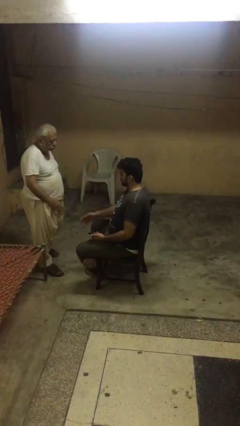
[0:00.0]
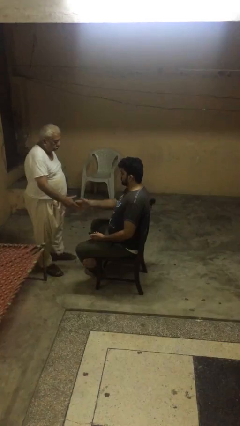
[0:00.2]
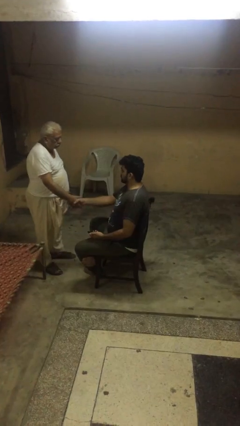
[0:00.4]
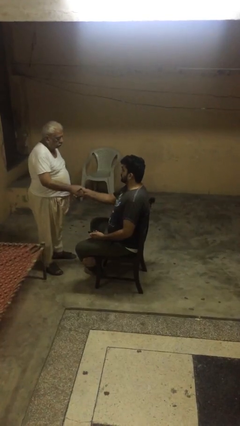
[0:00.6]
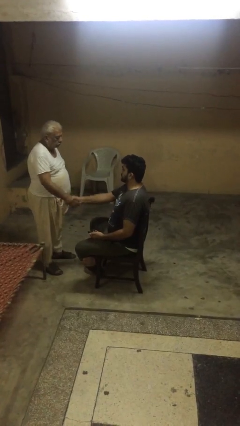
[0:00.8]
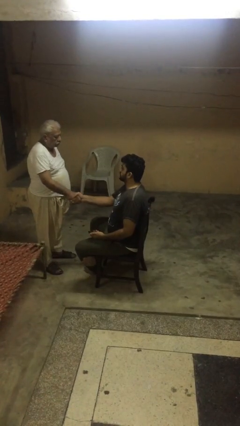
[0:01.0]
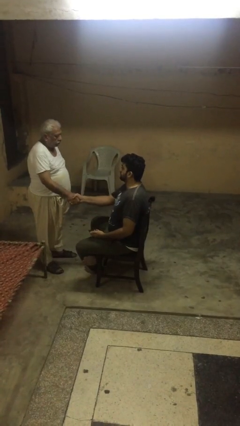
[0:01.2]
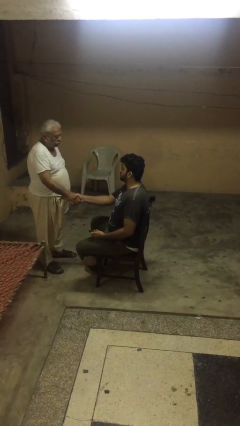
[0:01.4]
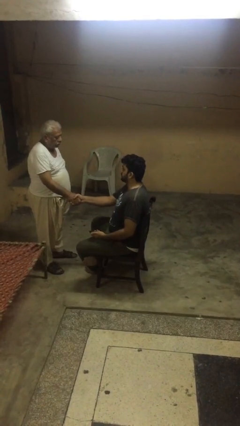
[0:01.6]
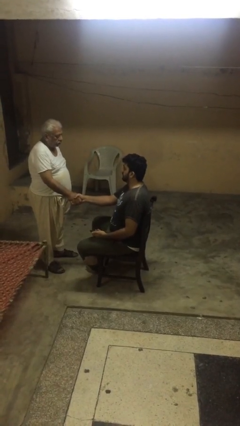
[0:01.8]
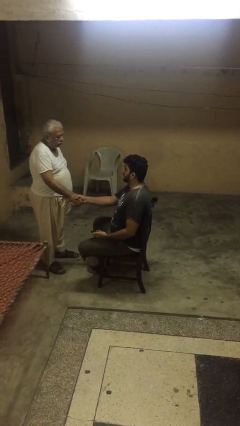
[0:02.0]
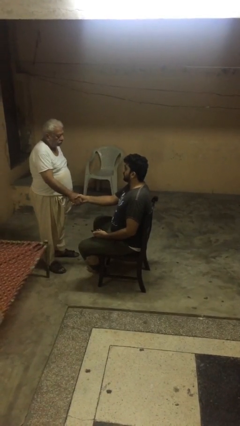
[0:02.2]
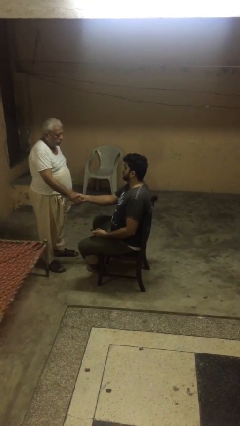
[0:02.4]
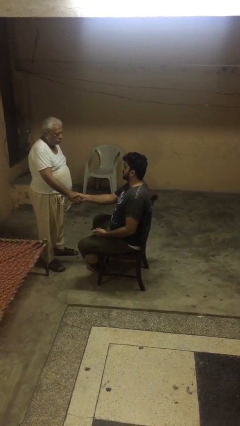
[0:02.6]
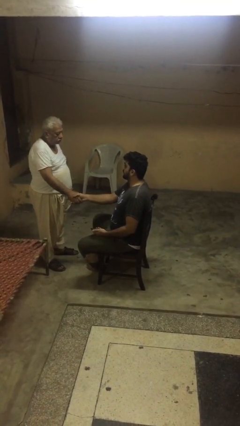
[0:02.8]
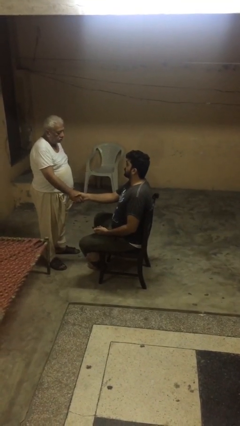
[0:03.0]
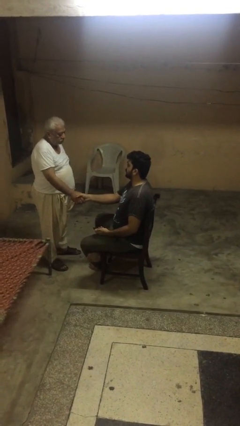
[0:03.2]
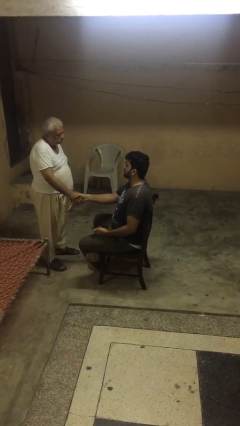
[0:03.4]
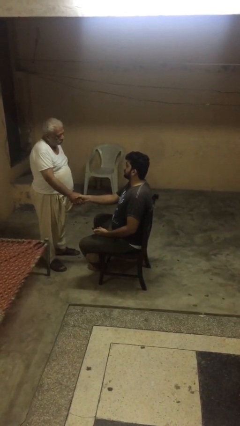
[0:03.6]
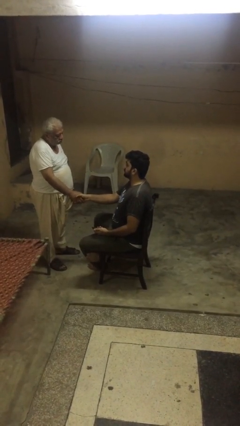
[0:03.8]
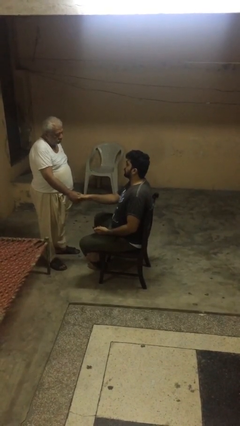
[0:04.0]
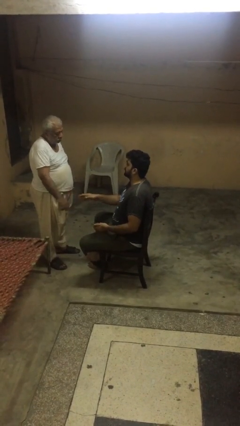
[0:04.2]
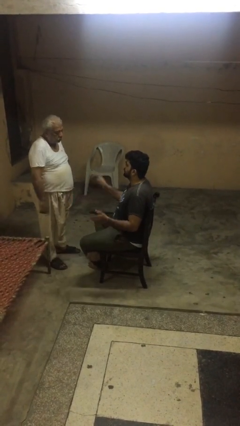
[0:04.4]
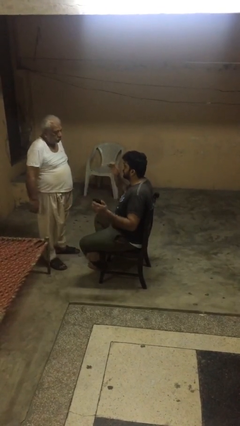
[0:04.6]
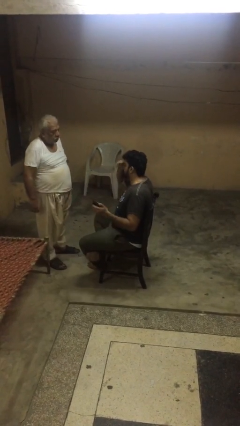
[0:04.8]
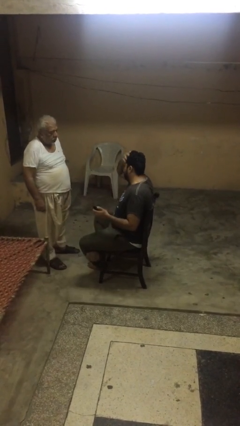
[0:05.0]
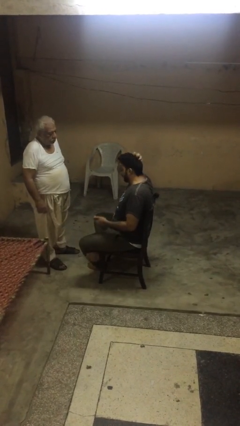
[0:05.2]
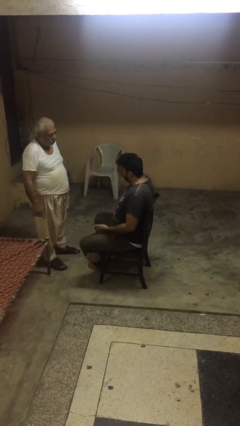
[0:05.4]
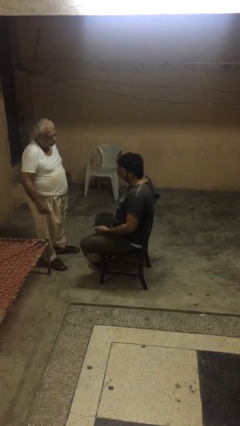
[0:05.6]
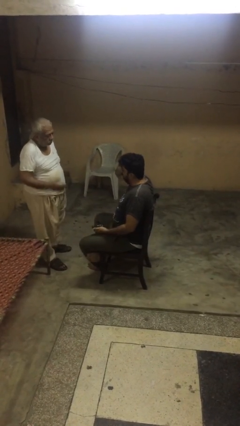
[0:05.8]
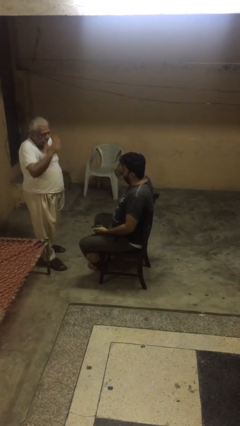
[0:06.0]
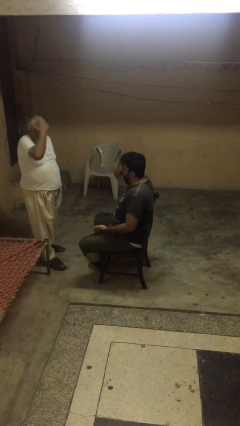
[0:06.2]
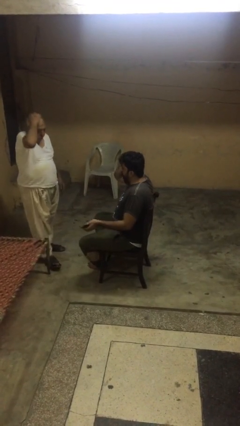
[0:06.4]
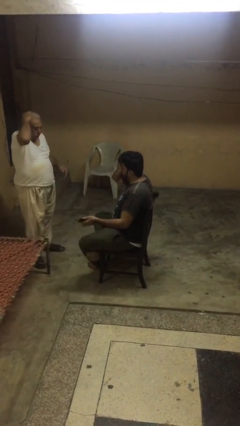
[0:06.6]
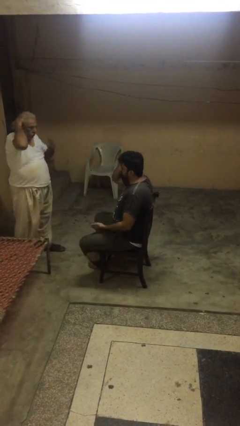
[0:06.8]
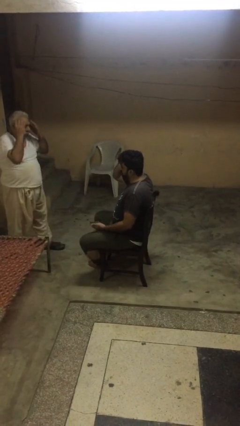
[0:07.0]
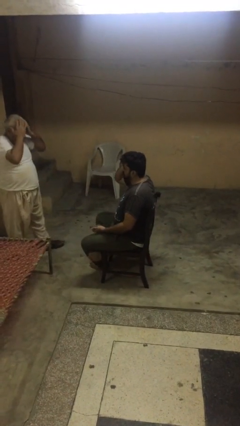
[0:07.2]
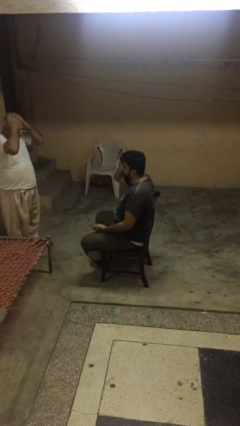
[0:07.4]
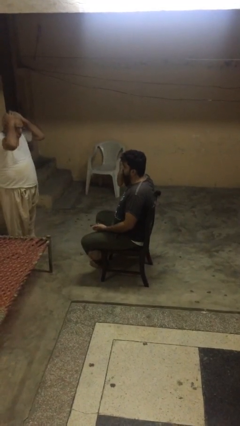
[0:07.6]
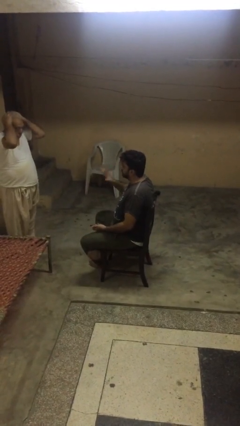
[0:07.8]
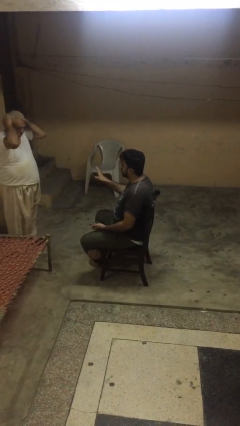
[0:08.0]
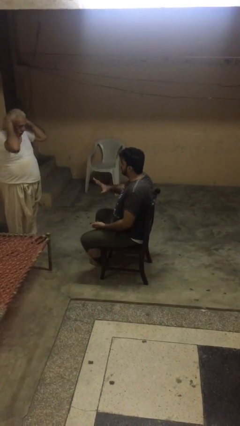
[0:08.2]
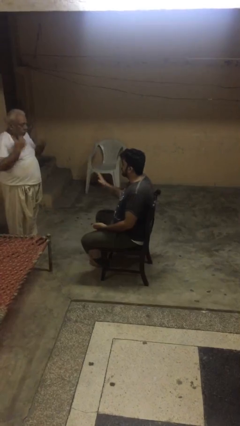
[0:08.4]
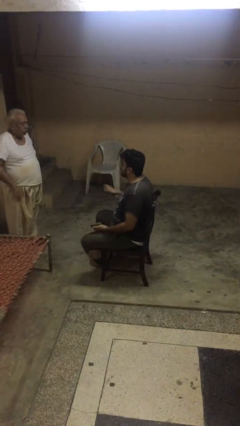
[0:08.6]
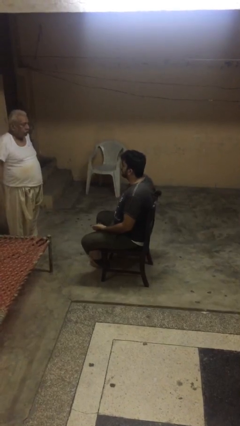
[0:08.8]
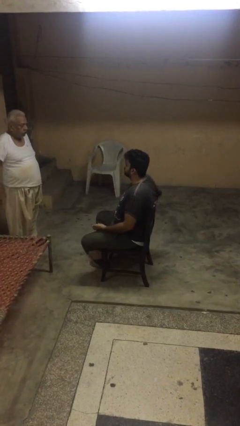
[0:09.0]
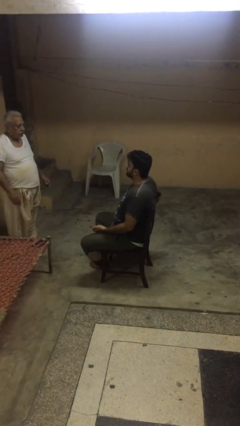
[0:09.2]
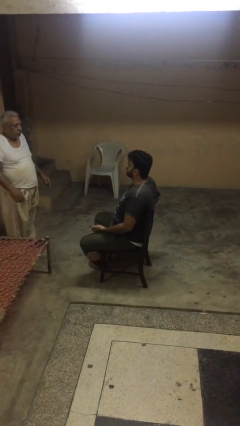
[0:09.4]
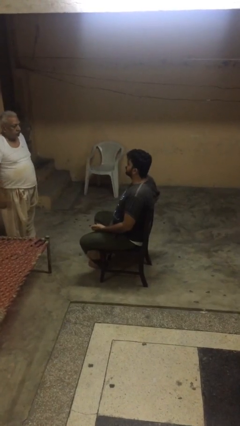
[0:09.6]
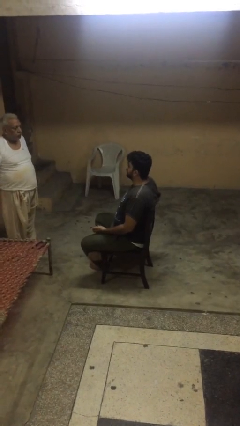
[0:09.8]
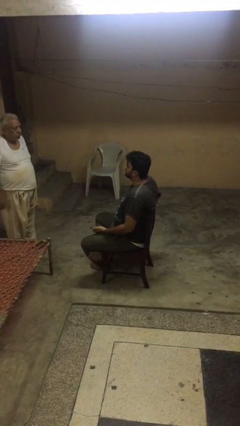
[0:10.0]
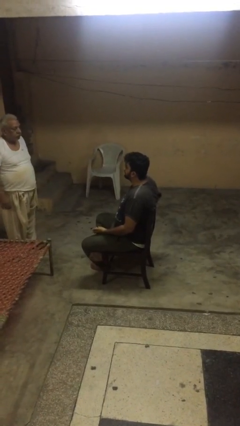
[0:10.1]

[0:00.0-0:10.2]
person shakes hand

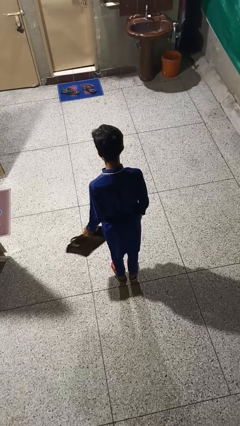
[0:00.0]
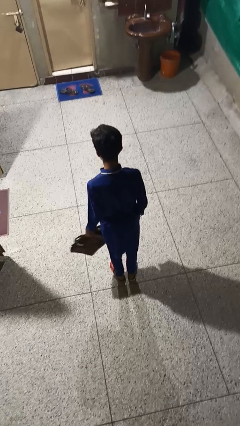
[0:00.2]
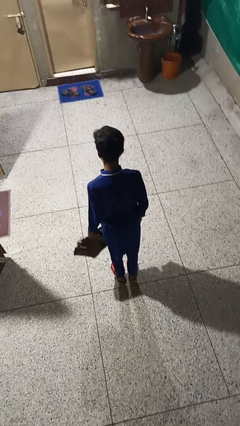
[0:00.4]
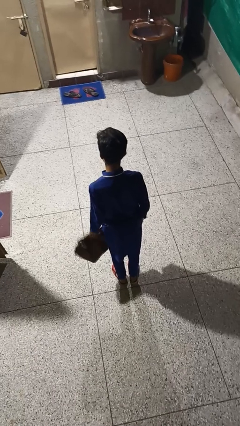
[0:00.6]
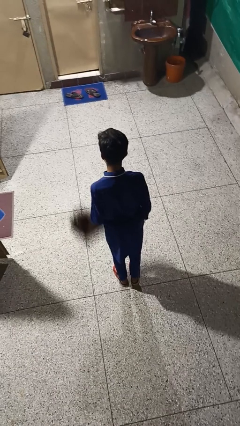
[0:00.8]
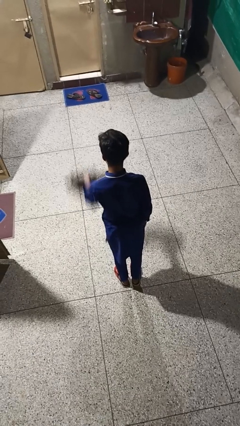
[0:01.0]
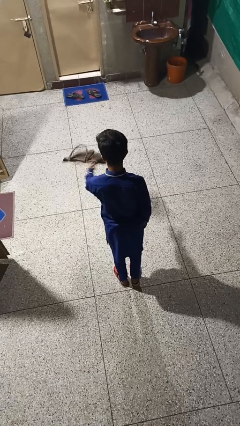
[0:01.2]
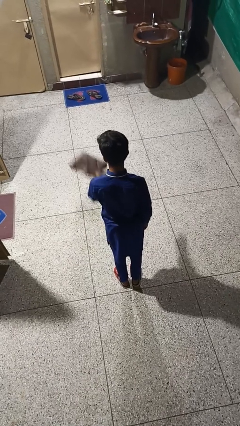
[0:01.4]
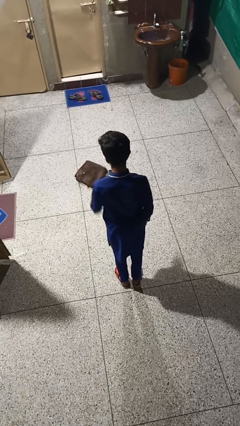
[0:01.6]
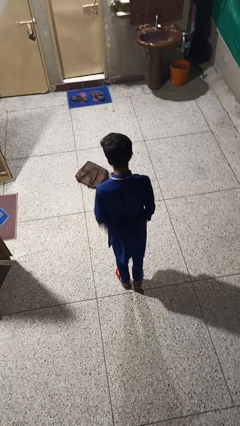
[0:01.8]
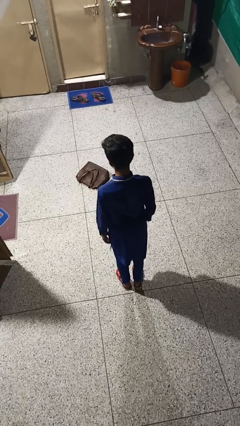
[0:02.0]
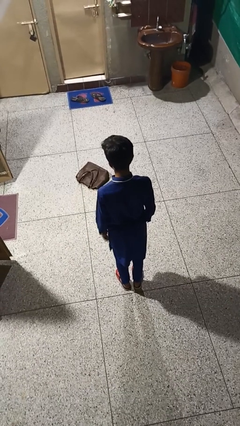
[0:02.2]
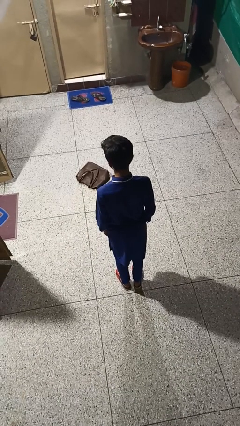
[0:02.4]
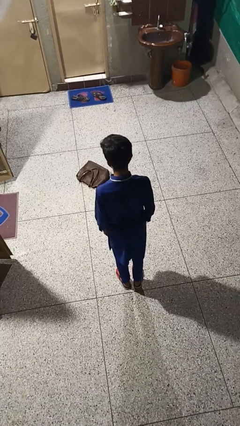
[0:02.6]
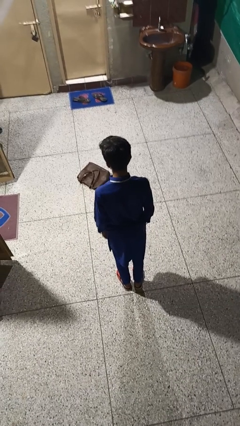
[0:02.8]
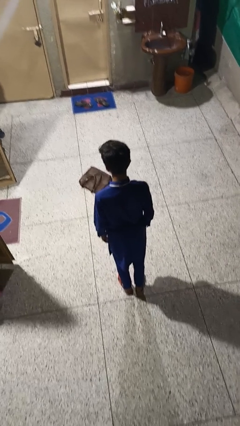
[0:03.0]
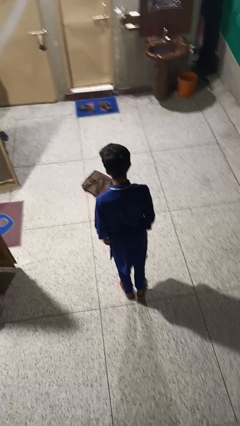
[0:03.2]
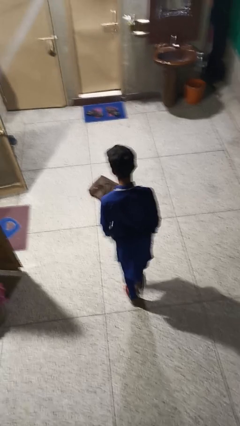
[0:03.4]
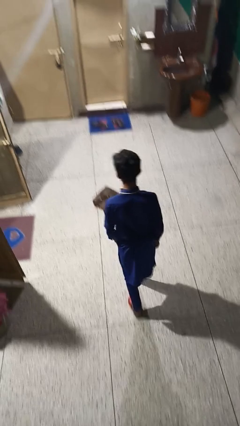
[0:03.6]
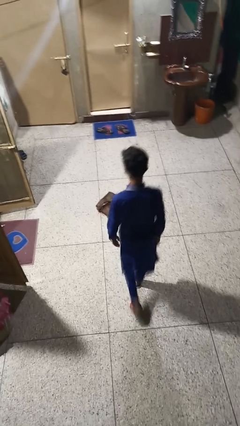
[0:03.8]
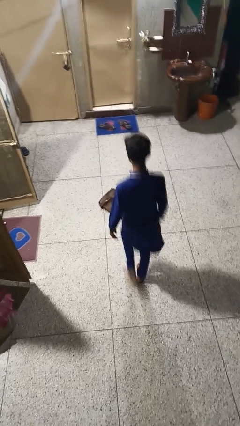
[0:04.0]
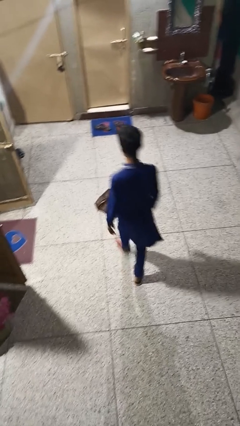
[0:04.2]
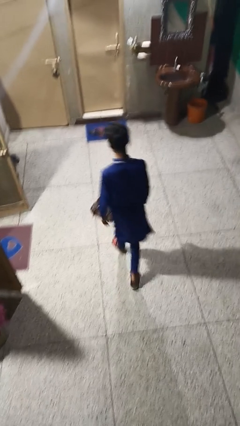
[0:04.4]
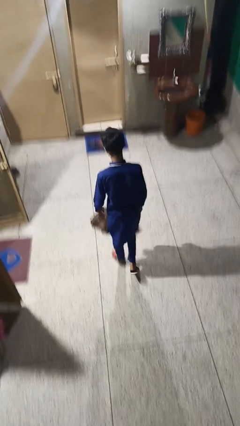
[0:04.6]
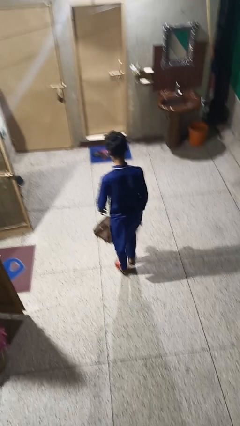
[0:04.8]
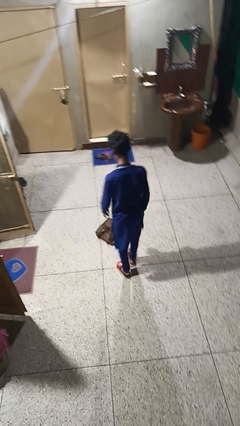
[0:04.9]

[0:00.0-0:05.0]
person throws object to ground

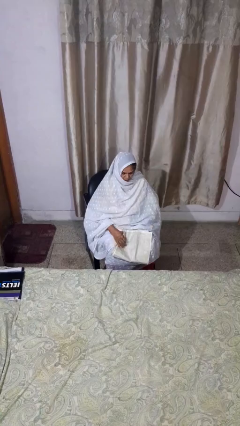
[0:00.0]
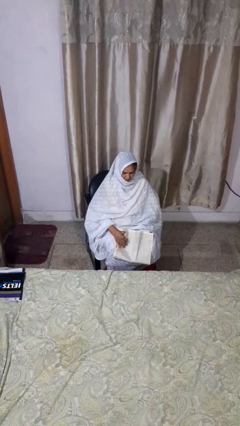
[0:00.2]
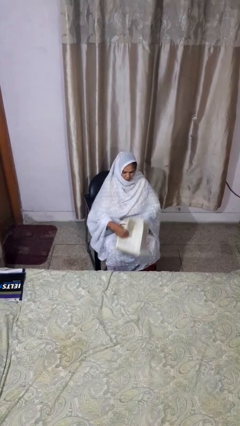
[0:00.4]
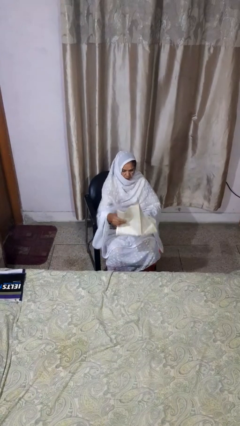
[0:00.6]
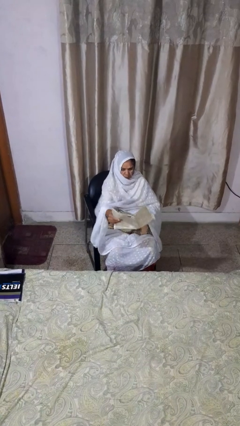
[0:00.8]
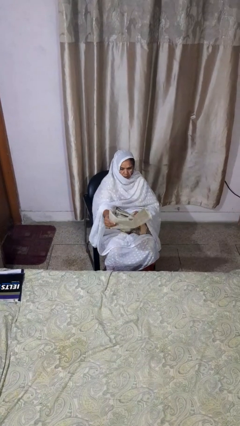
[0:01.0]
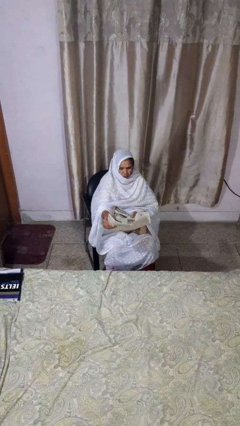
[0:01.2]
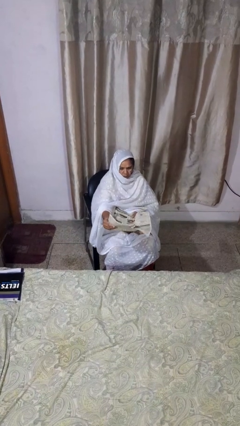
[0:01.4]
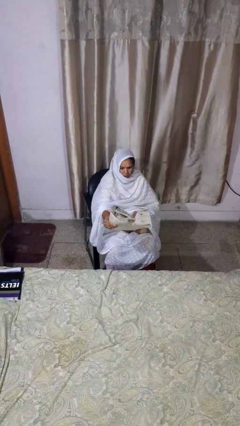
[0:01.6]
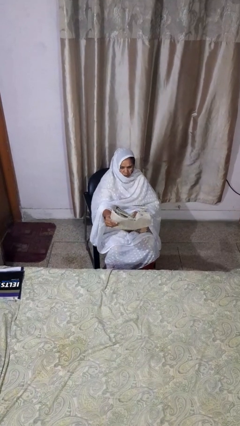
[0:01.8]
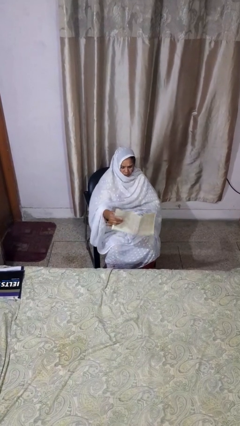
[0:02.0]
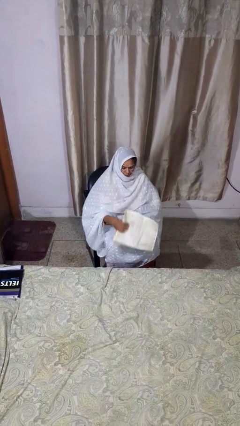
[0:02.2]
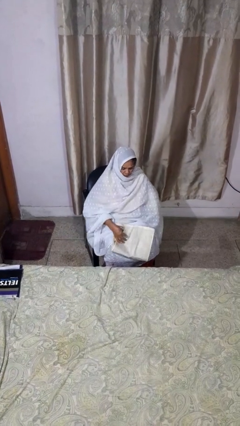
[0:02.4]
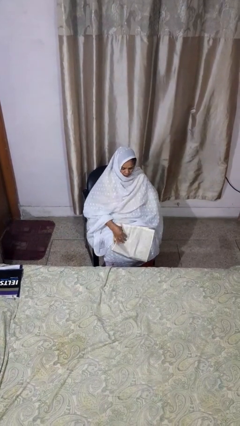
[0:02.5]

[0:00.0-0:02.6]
person reads newspaper
